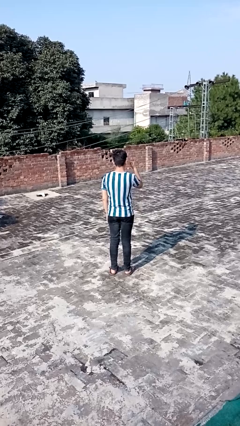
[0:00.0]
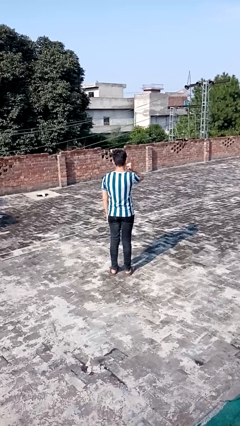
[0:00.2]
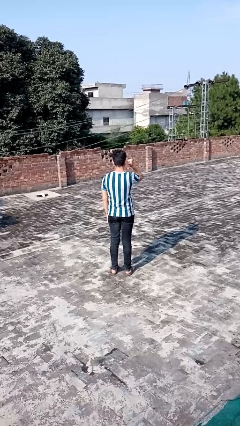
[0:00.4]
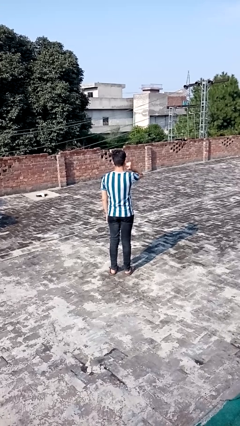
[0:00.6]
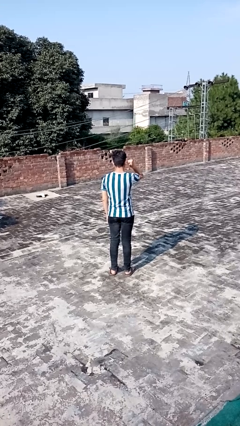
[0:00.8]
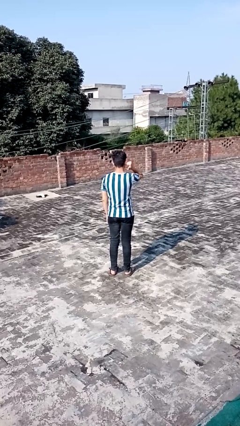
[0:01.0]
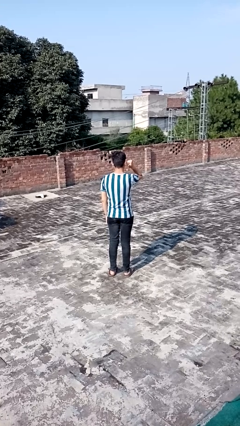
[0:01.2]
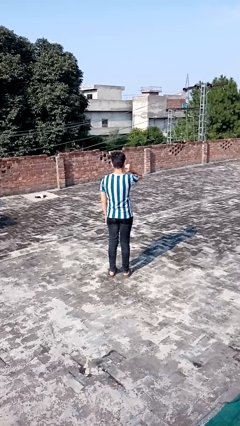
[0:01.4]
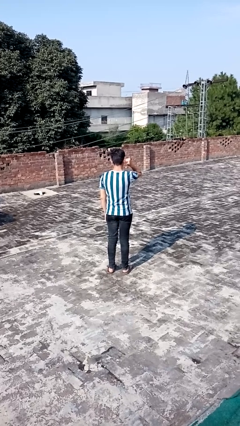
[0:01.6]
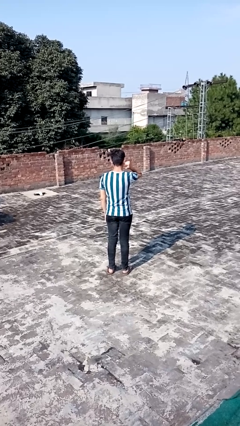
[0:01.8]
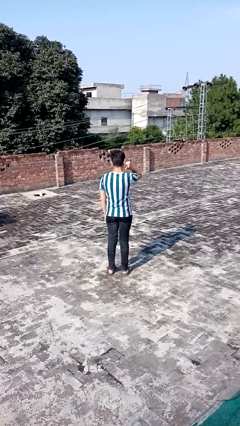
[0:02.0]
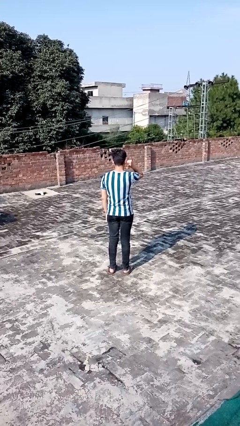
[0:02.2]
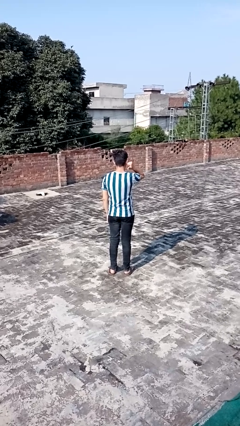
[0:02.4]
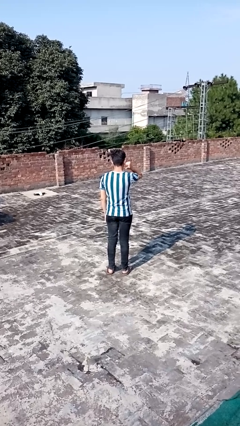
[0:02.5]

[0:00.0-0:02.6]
person gestures behind me

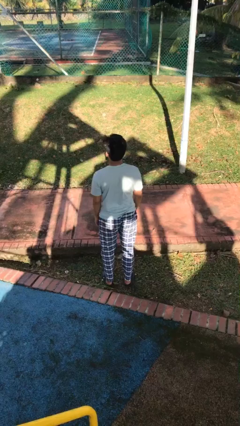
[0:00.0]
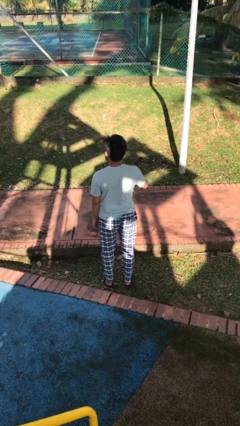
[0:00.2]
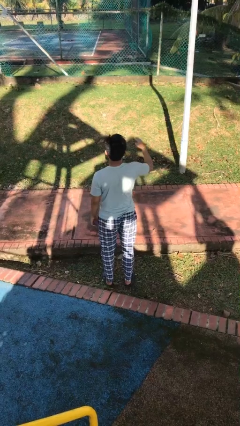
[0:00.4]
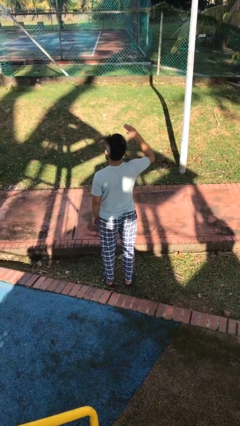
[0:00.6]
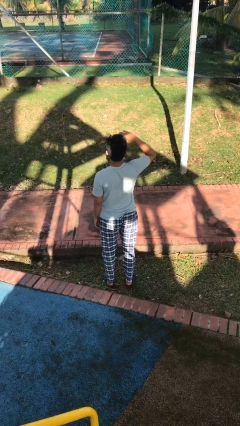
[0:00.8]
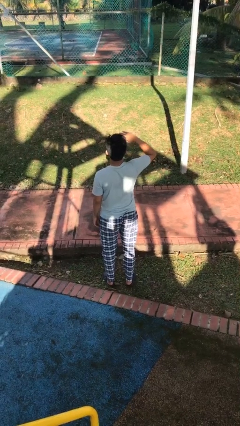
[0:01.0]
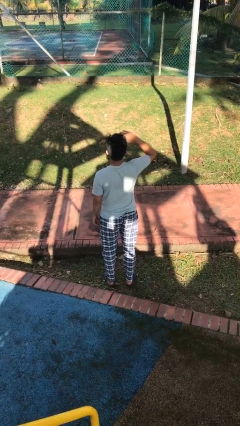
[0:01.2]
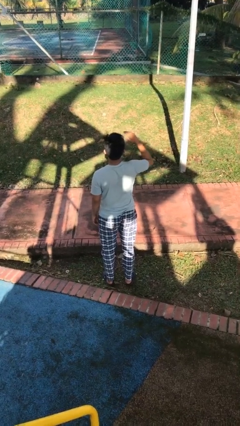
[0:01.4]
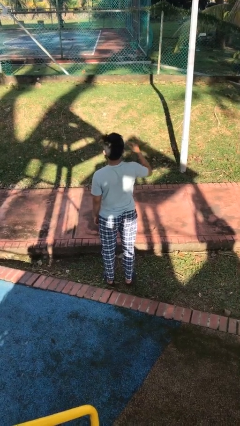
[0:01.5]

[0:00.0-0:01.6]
person salutes

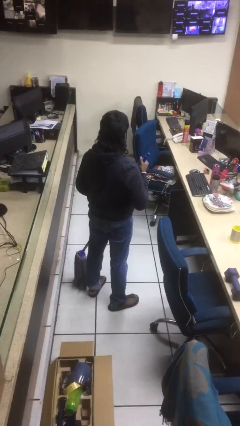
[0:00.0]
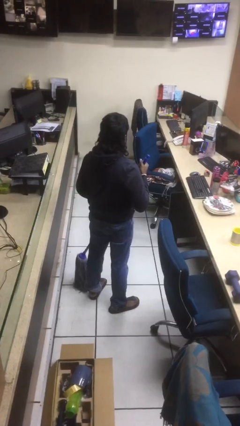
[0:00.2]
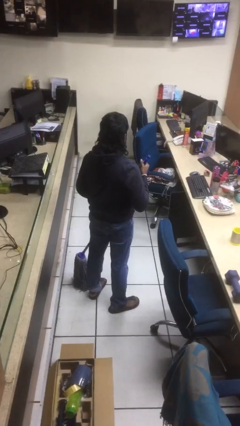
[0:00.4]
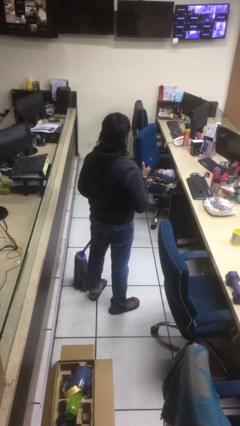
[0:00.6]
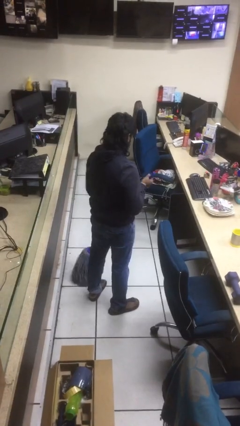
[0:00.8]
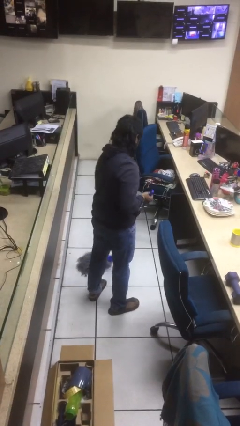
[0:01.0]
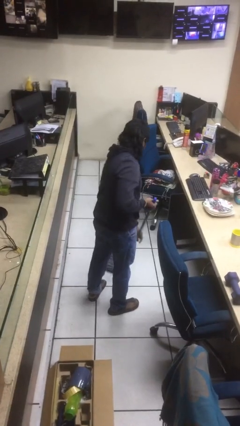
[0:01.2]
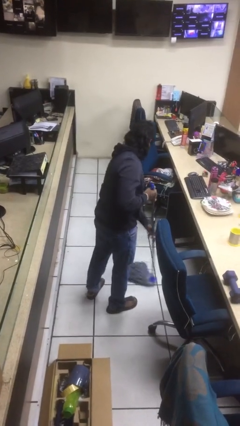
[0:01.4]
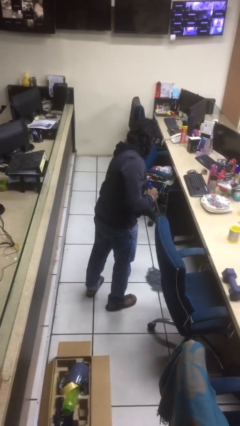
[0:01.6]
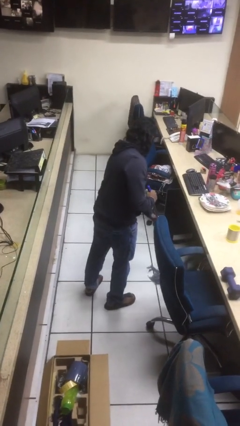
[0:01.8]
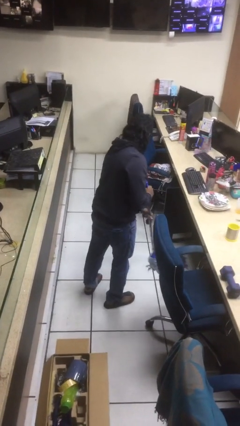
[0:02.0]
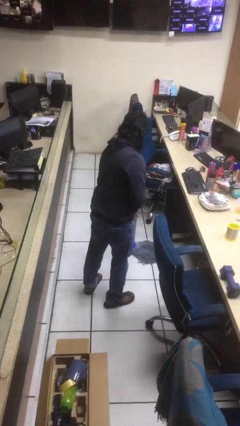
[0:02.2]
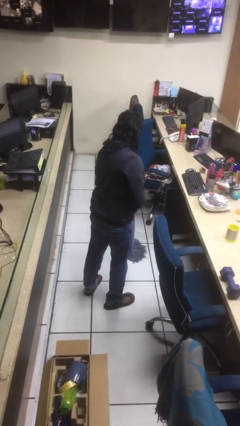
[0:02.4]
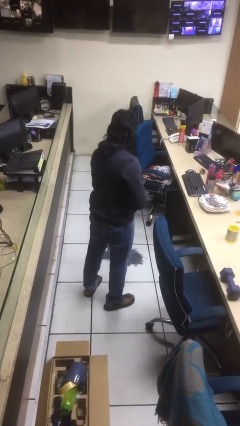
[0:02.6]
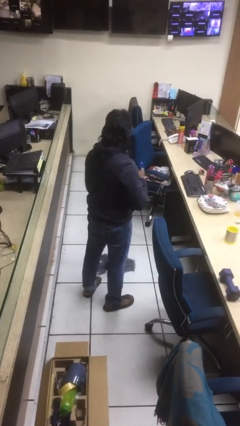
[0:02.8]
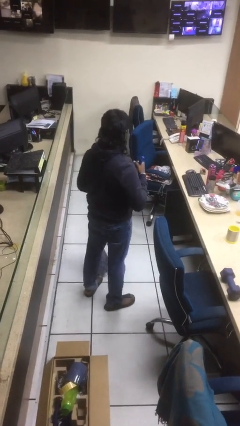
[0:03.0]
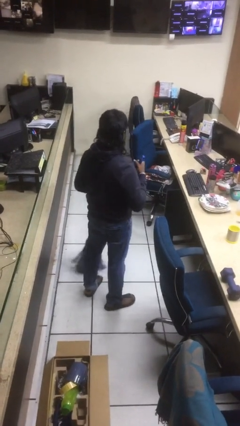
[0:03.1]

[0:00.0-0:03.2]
person mops

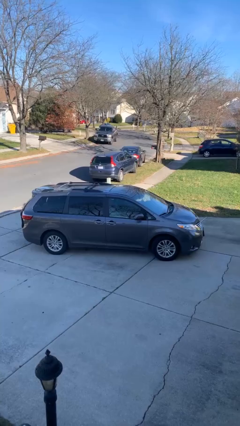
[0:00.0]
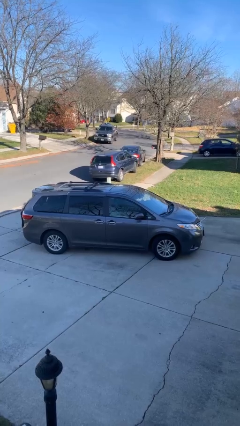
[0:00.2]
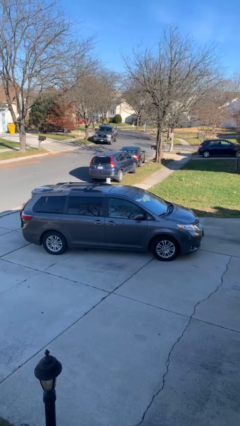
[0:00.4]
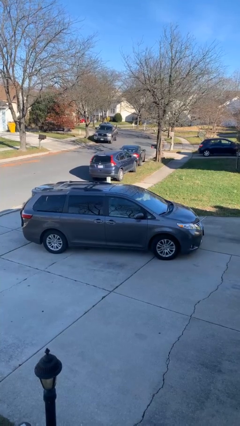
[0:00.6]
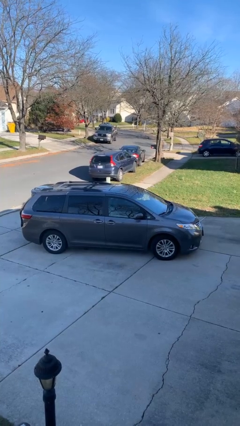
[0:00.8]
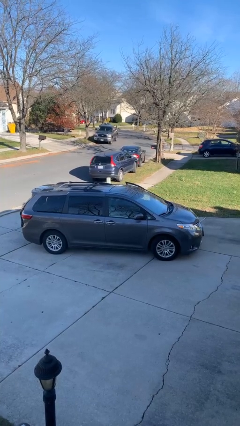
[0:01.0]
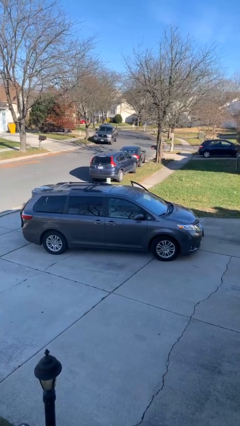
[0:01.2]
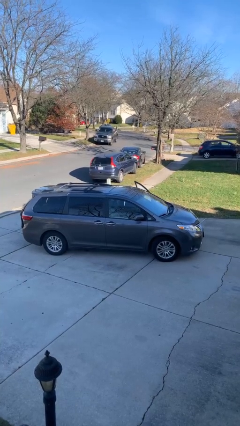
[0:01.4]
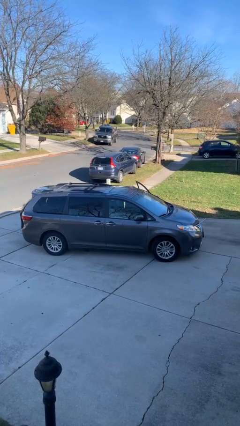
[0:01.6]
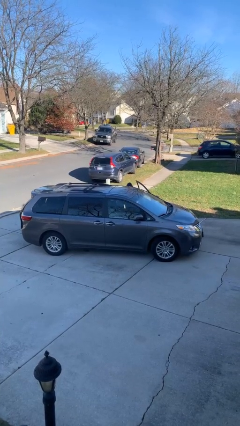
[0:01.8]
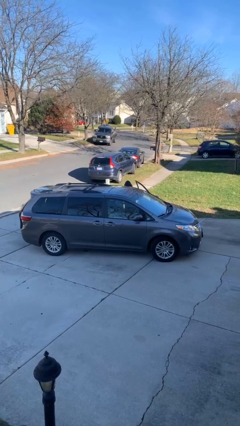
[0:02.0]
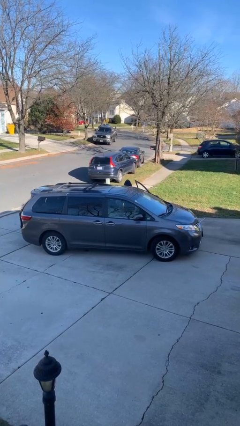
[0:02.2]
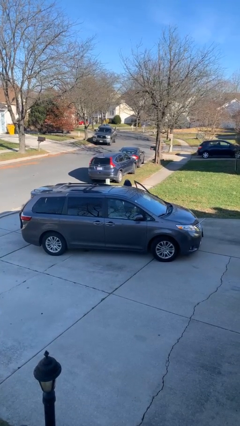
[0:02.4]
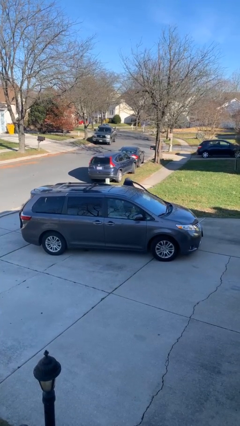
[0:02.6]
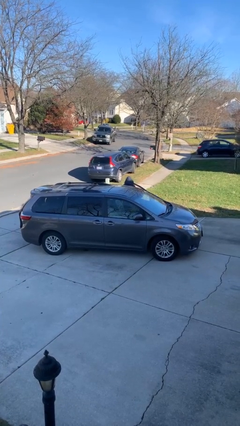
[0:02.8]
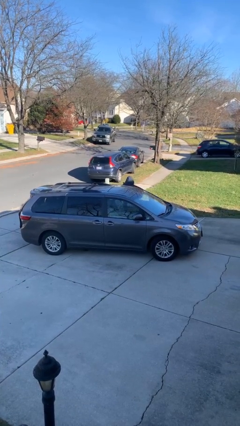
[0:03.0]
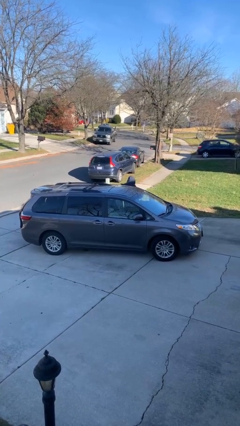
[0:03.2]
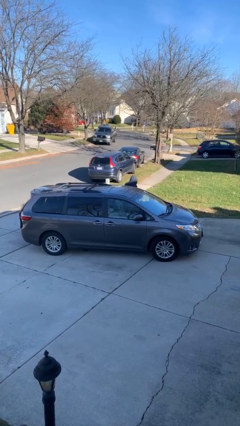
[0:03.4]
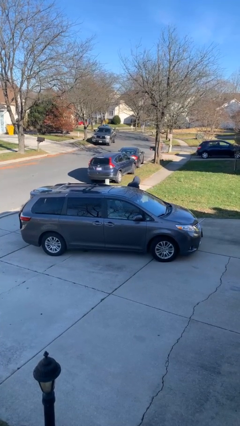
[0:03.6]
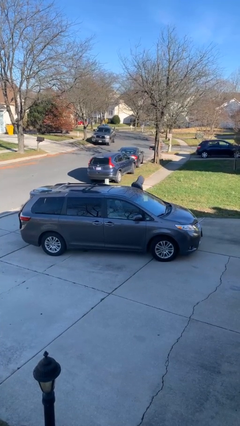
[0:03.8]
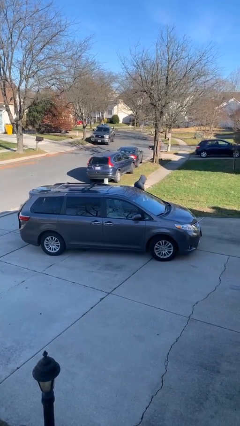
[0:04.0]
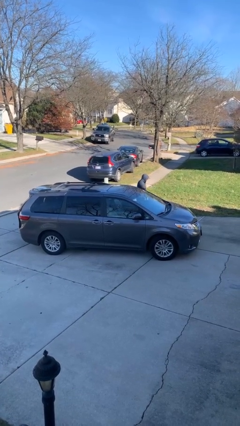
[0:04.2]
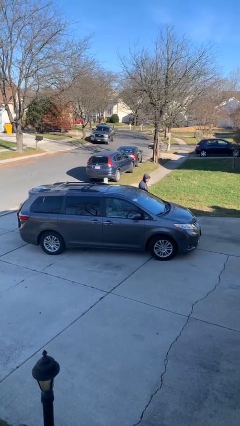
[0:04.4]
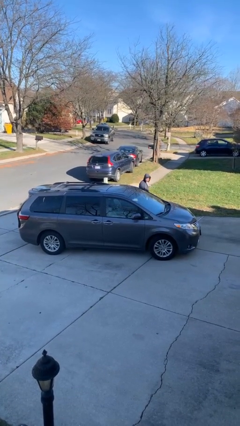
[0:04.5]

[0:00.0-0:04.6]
car drops off person

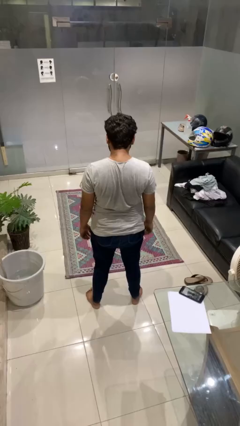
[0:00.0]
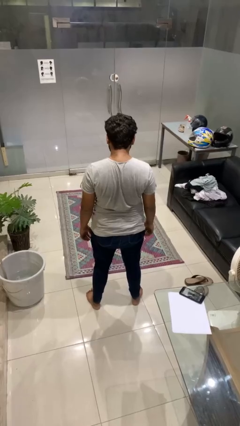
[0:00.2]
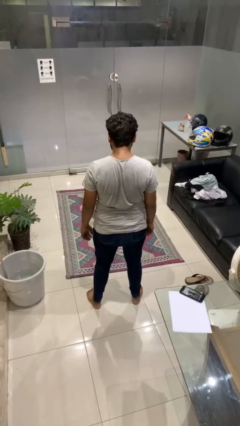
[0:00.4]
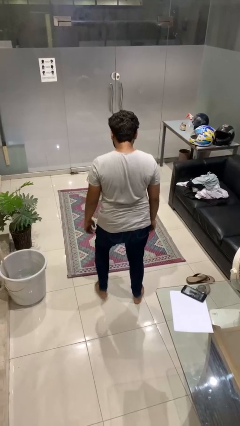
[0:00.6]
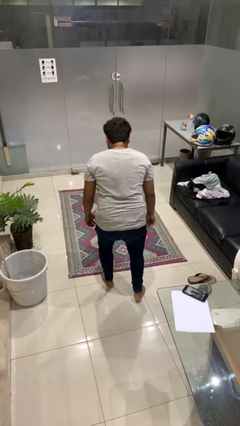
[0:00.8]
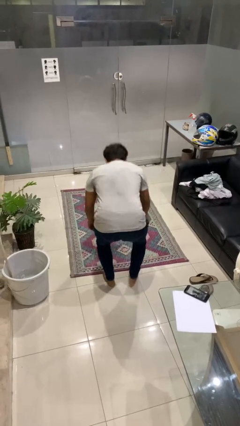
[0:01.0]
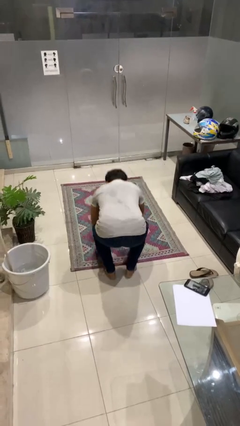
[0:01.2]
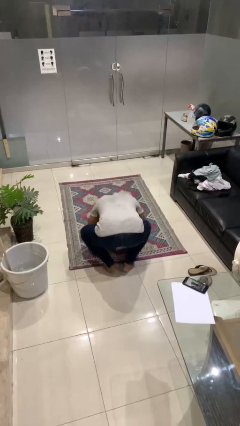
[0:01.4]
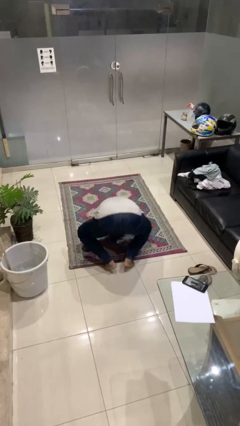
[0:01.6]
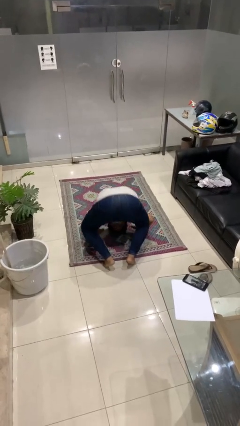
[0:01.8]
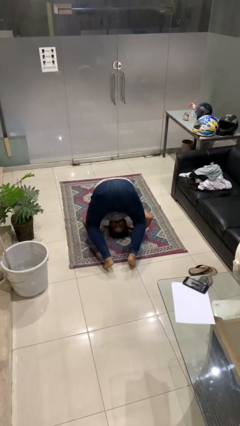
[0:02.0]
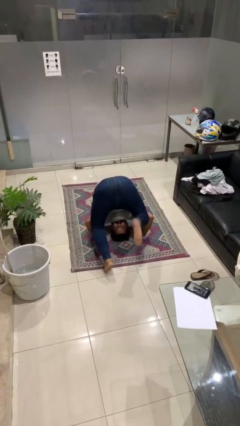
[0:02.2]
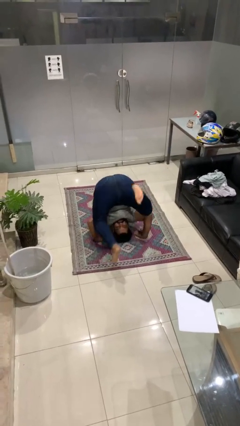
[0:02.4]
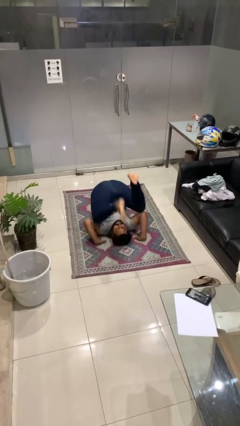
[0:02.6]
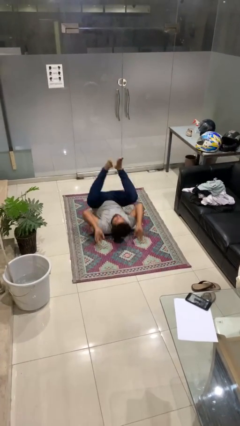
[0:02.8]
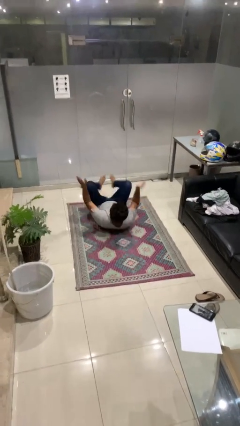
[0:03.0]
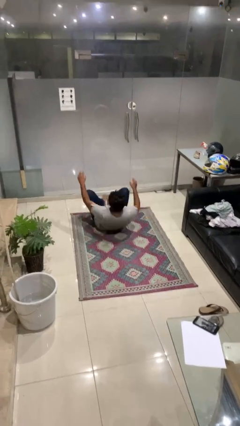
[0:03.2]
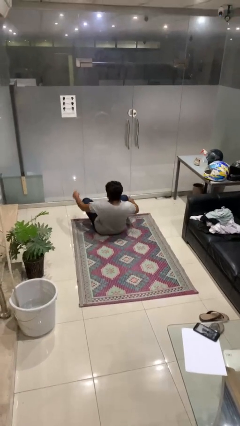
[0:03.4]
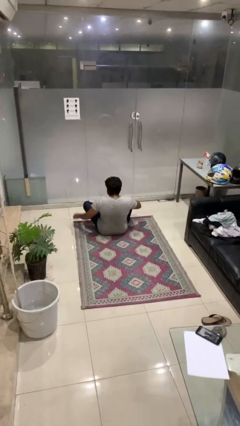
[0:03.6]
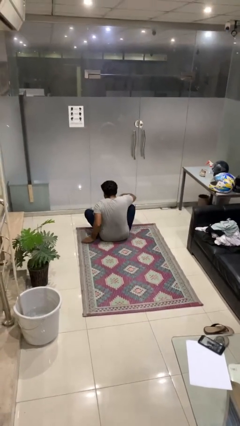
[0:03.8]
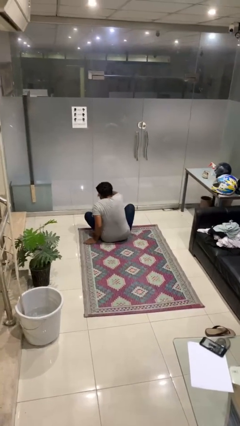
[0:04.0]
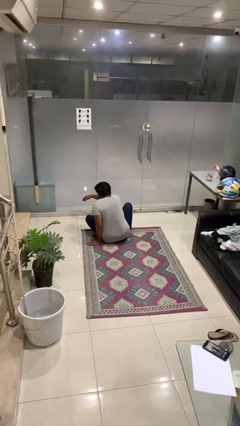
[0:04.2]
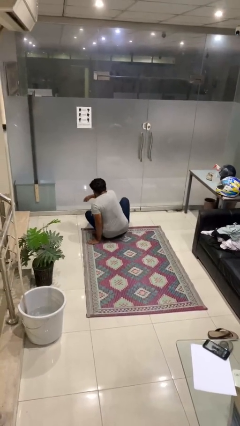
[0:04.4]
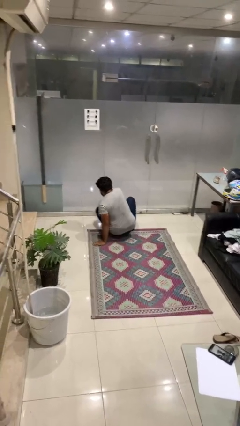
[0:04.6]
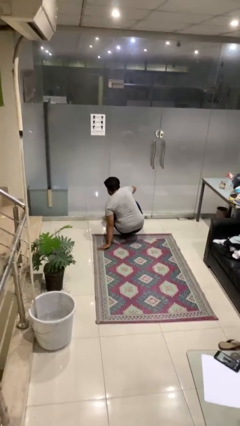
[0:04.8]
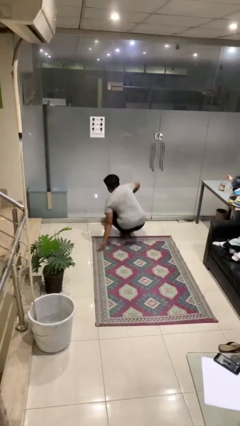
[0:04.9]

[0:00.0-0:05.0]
person somersaults

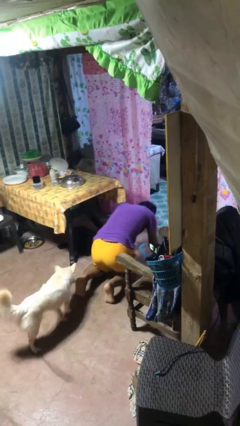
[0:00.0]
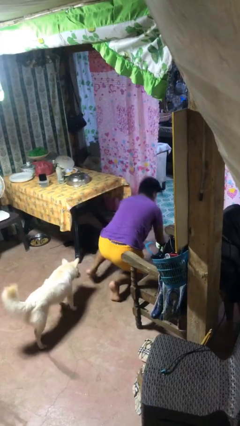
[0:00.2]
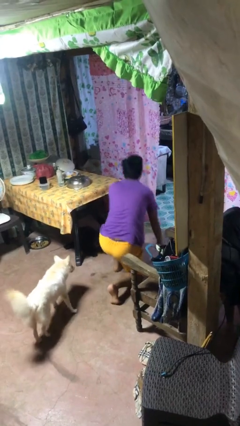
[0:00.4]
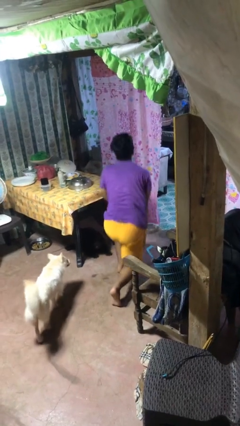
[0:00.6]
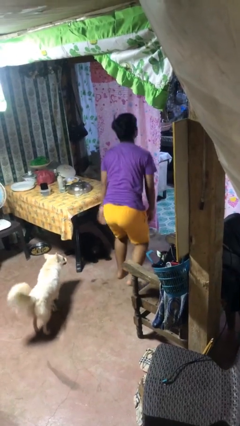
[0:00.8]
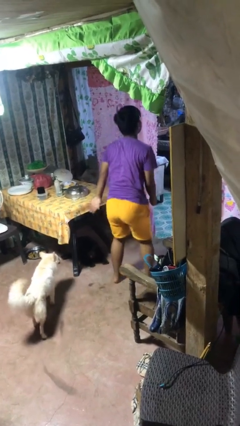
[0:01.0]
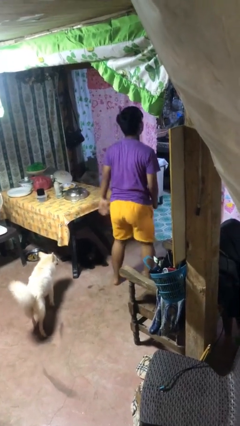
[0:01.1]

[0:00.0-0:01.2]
person stands up from floor
